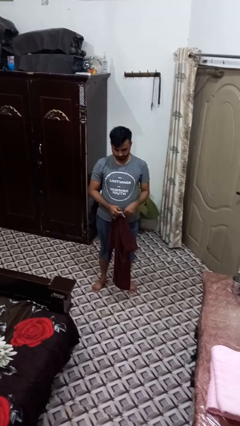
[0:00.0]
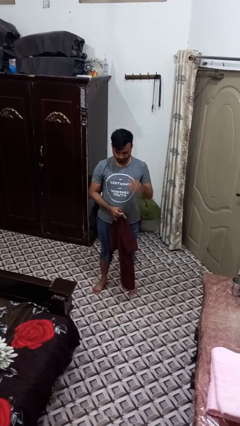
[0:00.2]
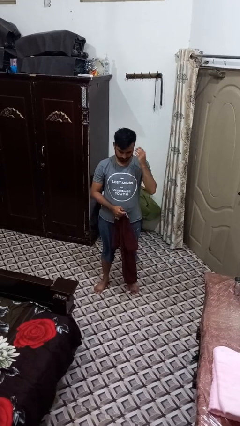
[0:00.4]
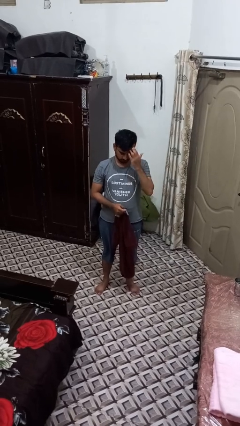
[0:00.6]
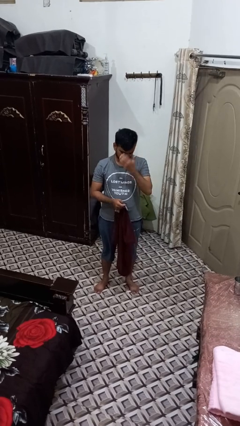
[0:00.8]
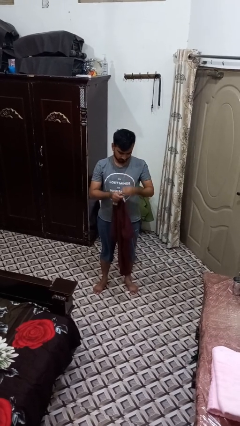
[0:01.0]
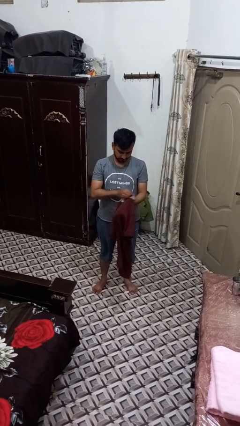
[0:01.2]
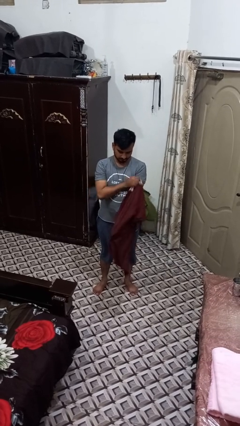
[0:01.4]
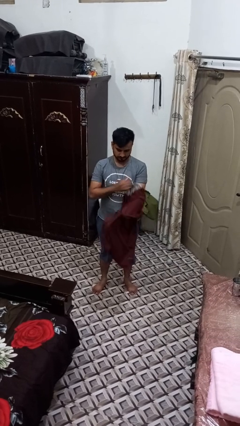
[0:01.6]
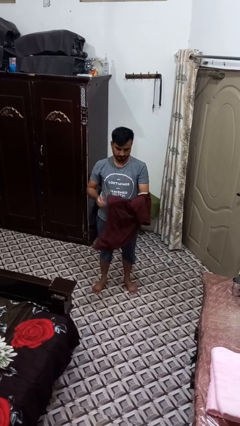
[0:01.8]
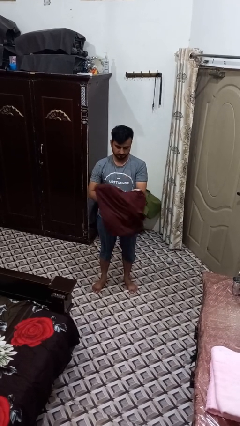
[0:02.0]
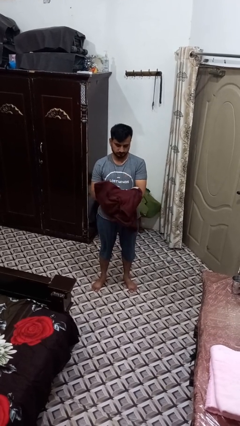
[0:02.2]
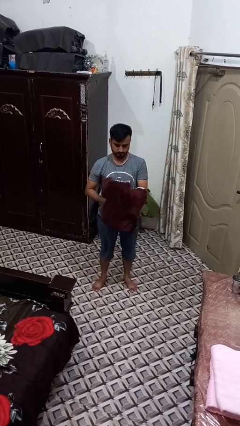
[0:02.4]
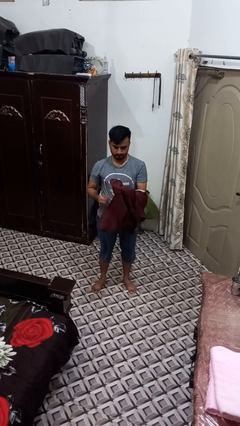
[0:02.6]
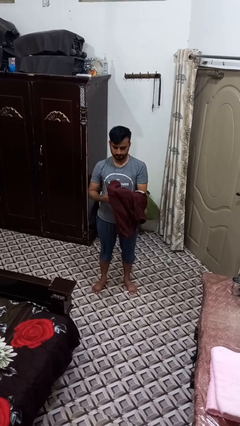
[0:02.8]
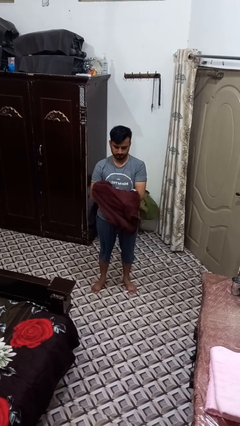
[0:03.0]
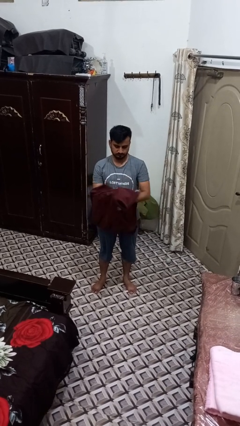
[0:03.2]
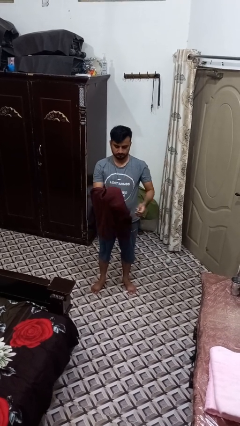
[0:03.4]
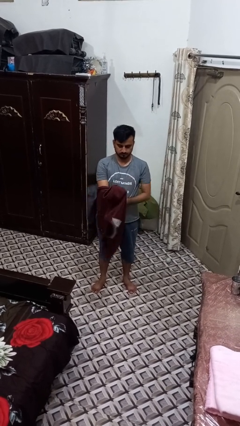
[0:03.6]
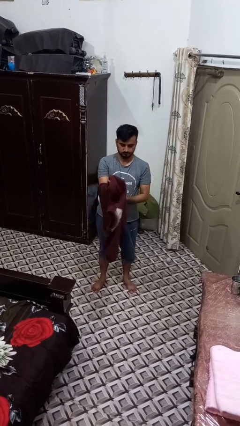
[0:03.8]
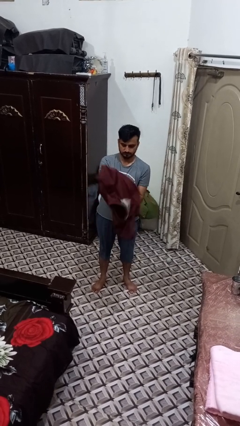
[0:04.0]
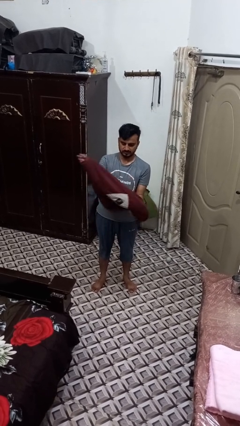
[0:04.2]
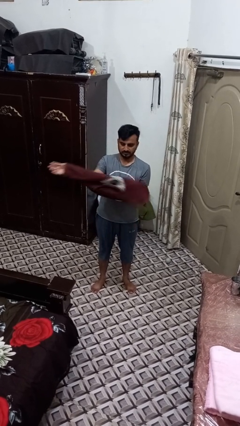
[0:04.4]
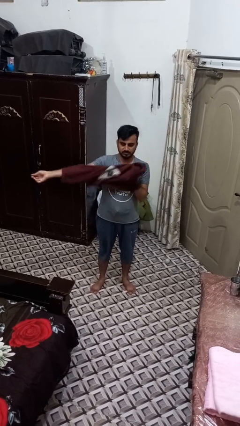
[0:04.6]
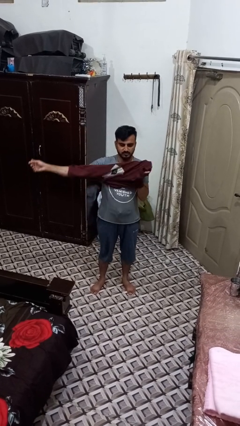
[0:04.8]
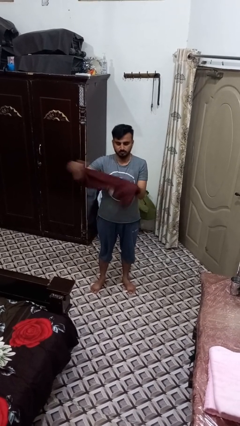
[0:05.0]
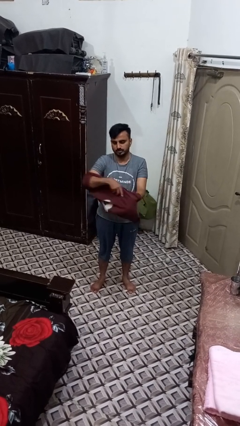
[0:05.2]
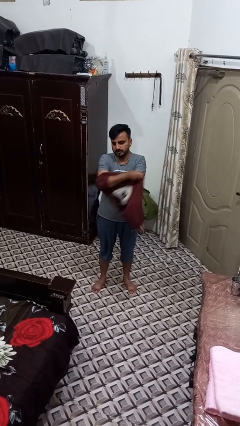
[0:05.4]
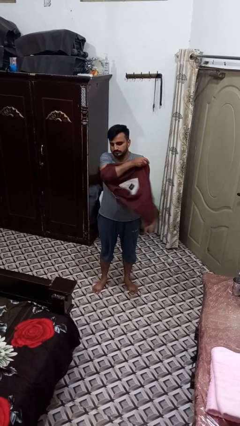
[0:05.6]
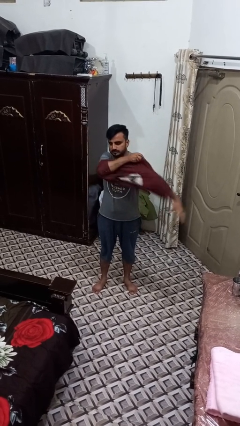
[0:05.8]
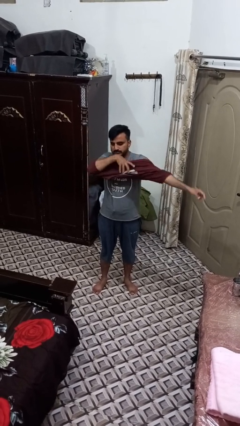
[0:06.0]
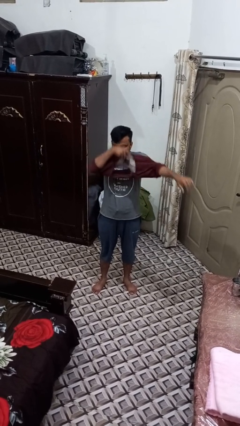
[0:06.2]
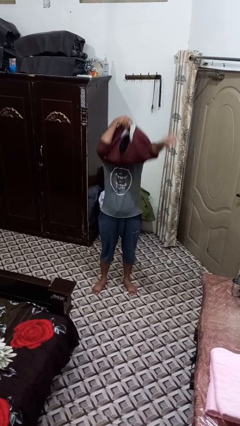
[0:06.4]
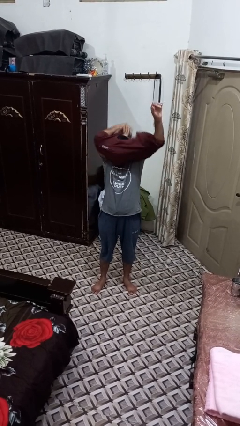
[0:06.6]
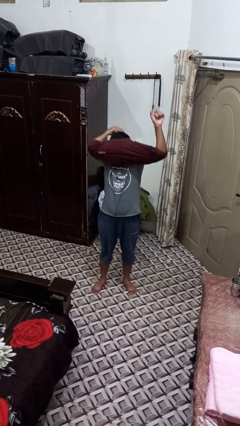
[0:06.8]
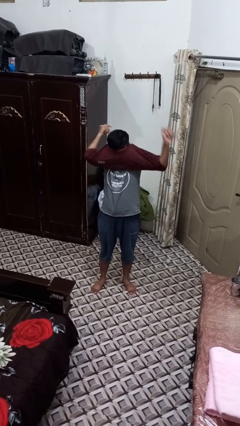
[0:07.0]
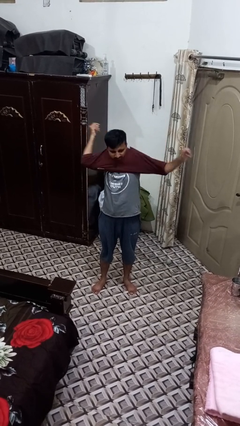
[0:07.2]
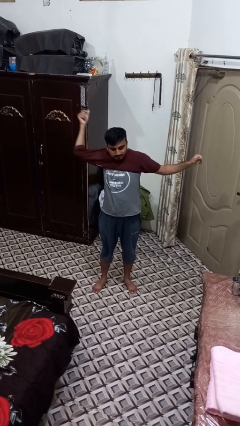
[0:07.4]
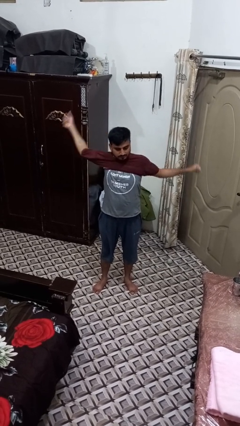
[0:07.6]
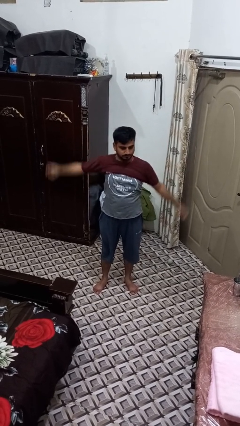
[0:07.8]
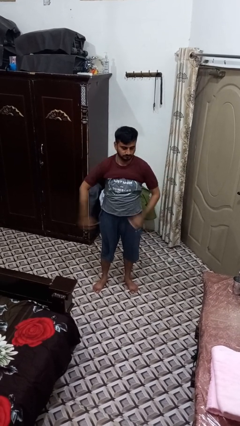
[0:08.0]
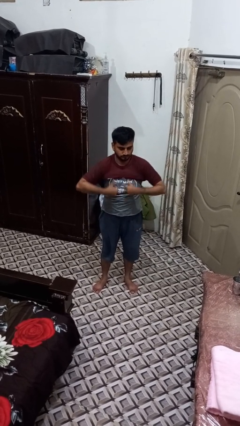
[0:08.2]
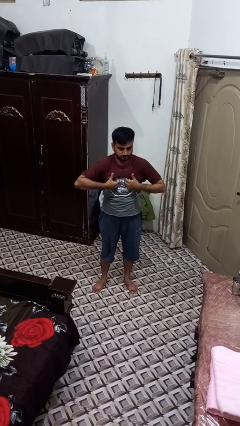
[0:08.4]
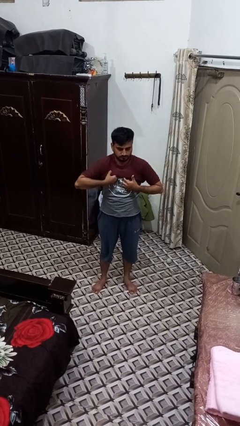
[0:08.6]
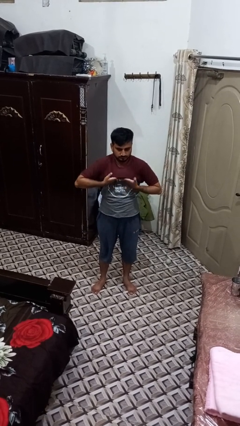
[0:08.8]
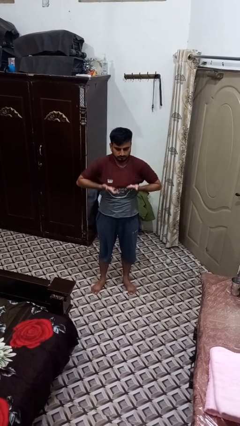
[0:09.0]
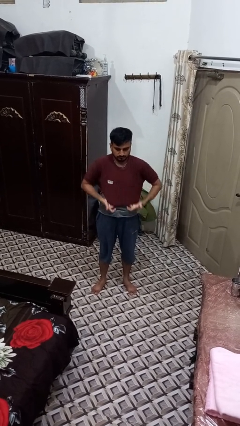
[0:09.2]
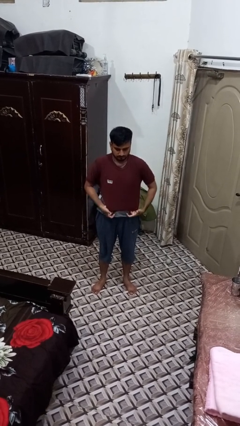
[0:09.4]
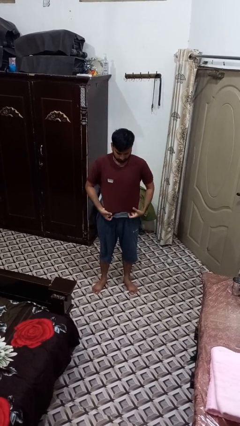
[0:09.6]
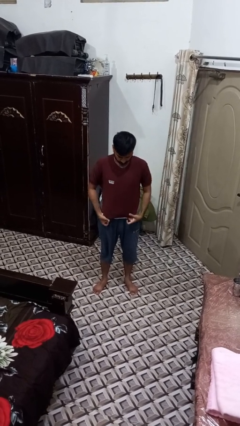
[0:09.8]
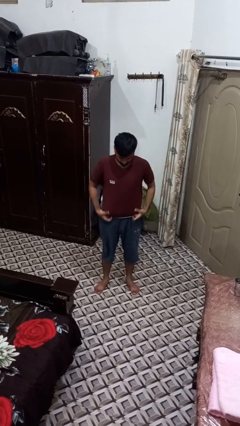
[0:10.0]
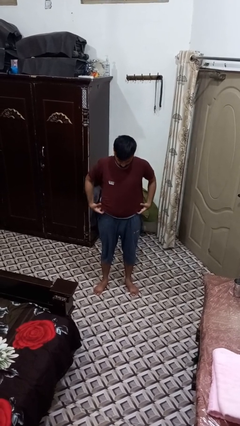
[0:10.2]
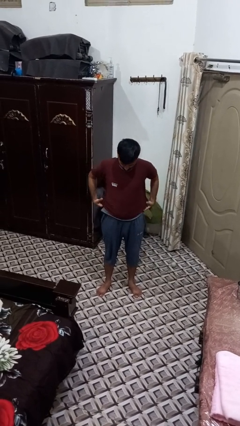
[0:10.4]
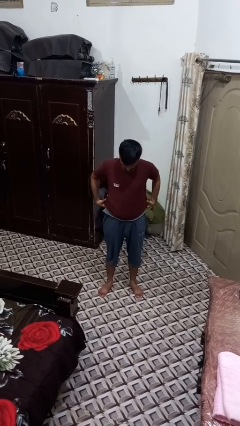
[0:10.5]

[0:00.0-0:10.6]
person puts on shirt

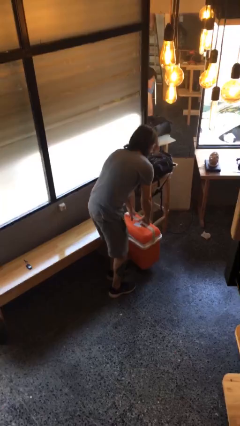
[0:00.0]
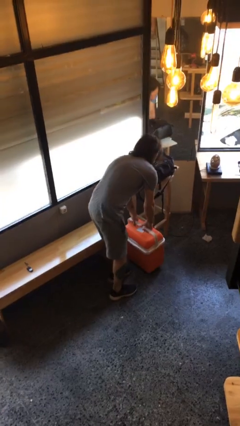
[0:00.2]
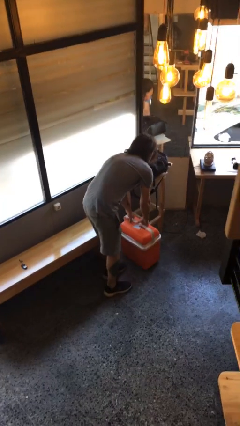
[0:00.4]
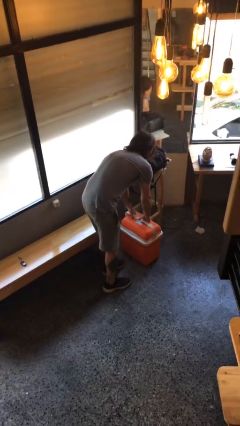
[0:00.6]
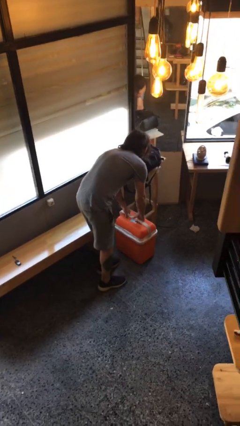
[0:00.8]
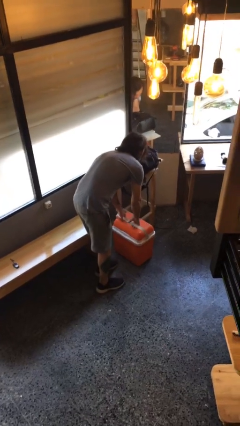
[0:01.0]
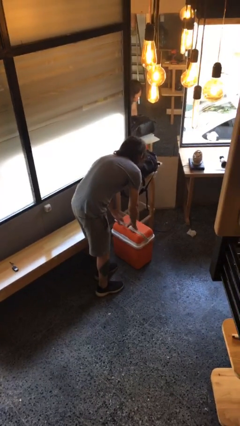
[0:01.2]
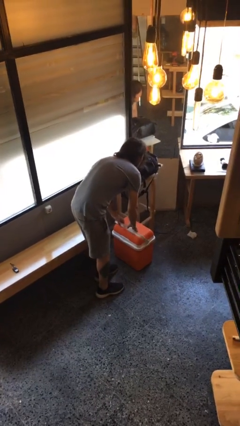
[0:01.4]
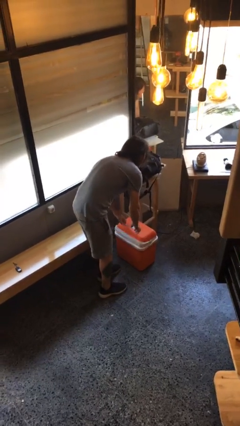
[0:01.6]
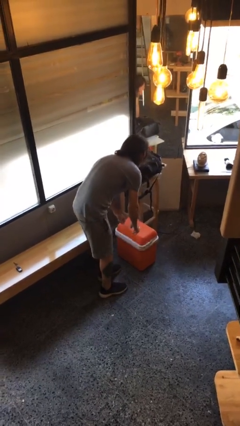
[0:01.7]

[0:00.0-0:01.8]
person puts down object on floor

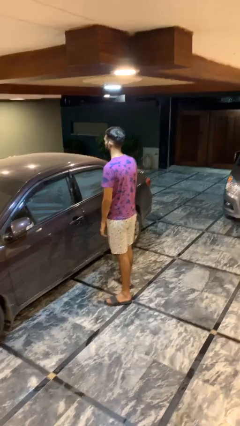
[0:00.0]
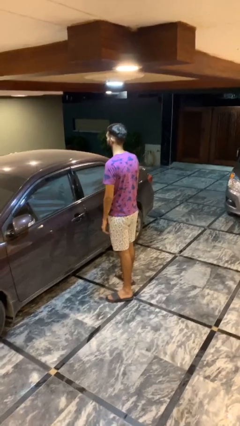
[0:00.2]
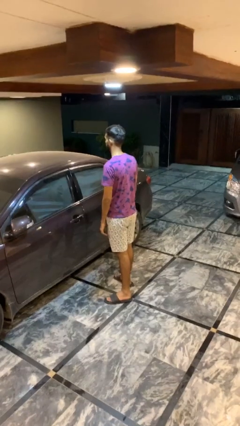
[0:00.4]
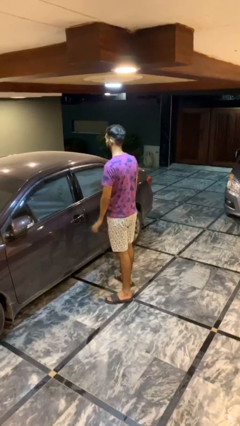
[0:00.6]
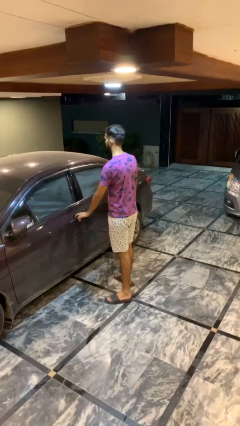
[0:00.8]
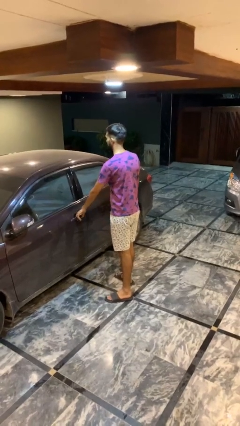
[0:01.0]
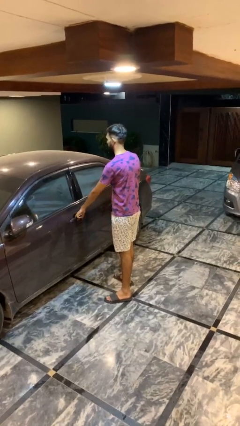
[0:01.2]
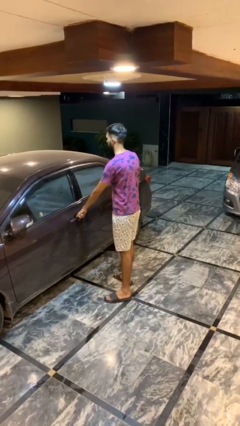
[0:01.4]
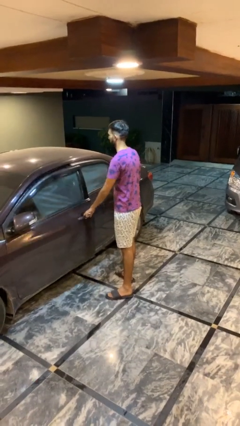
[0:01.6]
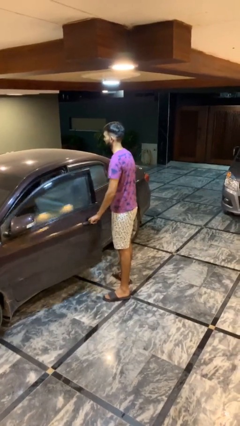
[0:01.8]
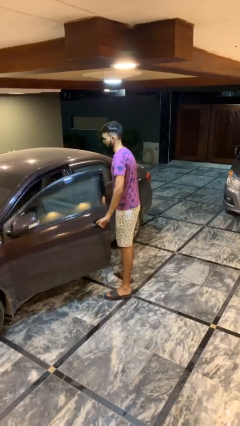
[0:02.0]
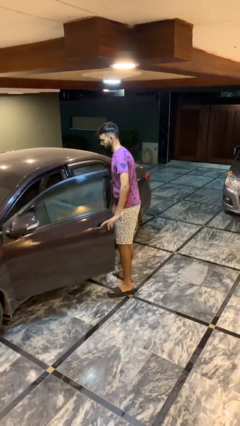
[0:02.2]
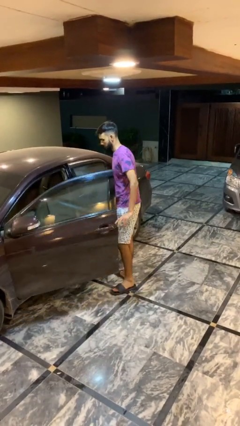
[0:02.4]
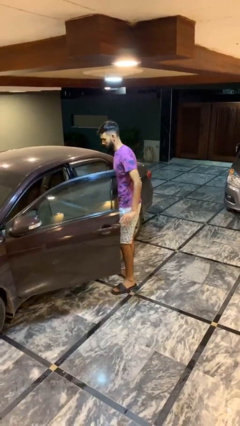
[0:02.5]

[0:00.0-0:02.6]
person opens car door

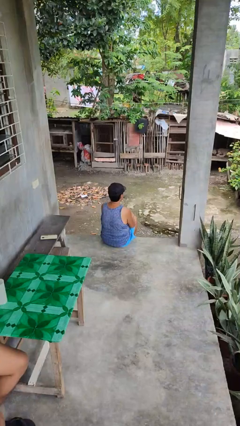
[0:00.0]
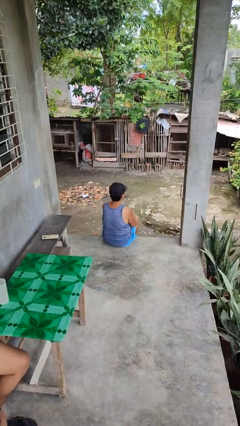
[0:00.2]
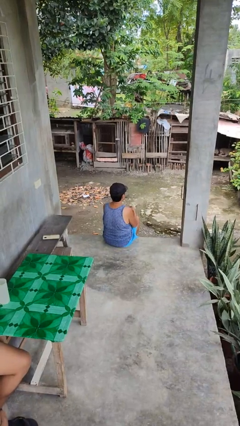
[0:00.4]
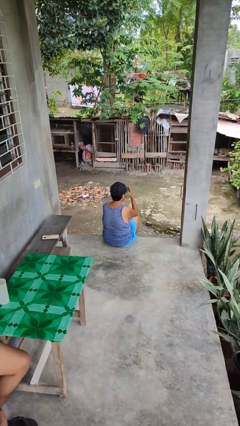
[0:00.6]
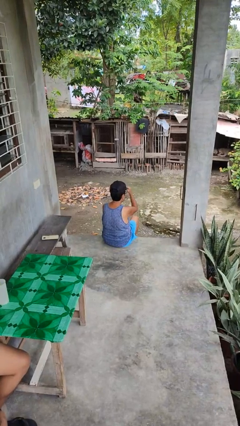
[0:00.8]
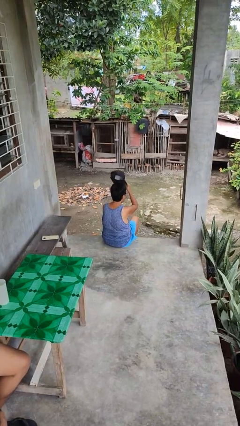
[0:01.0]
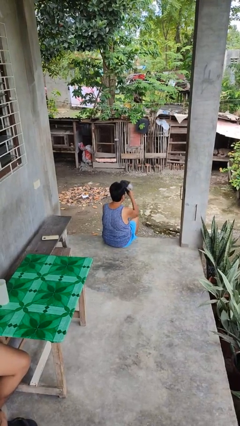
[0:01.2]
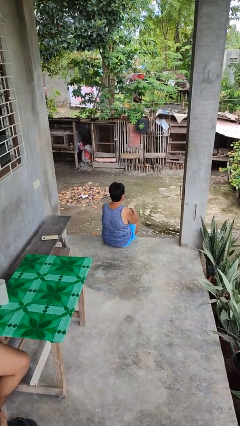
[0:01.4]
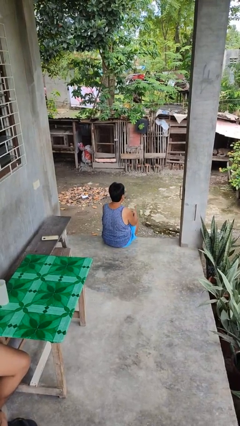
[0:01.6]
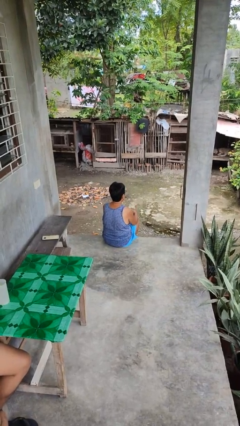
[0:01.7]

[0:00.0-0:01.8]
person takes off hat

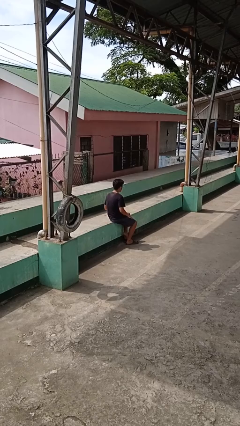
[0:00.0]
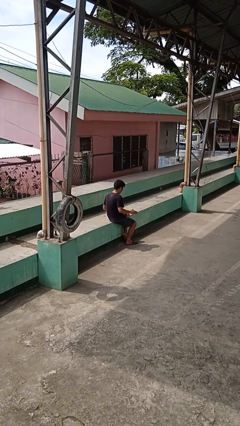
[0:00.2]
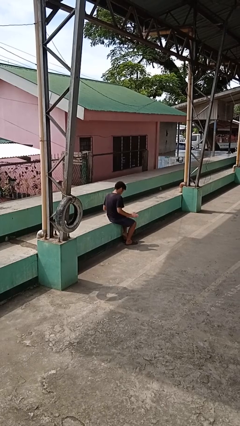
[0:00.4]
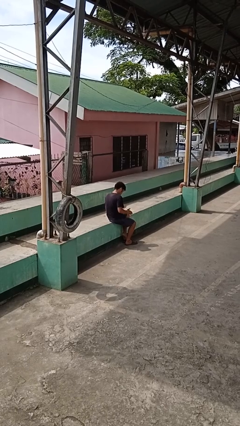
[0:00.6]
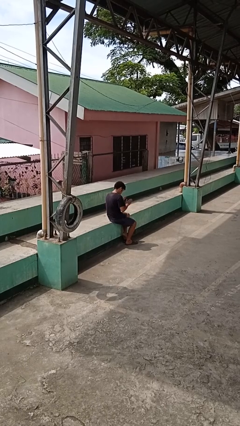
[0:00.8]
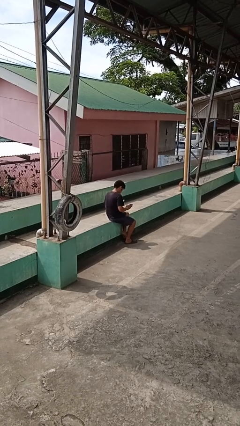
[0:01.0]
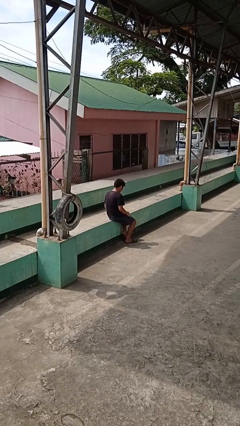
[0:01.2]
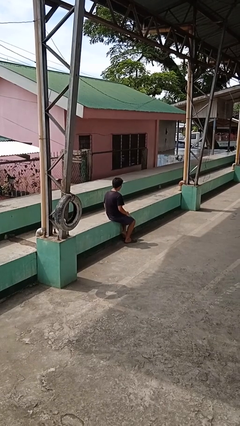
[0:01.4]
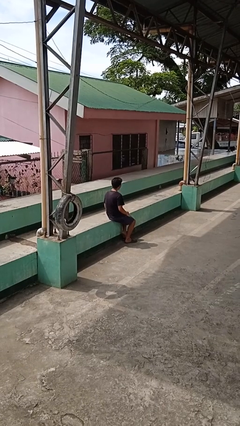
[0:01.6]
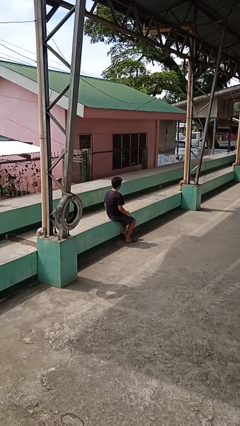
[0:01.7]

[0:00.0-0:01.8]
person slaps hands on thighs
